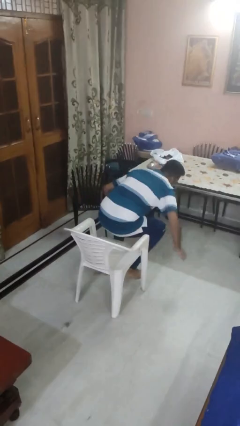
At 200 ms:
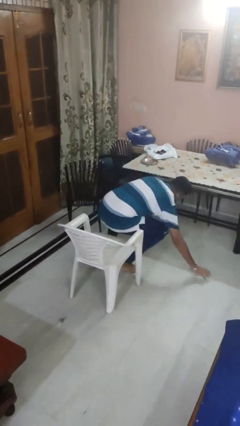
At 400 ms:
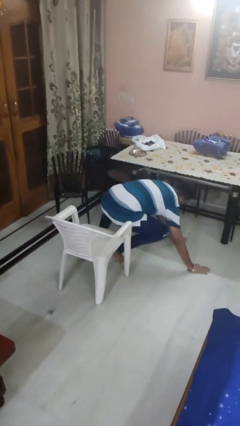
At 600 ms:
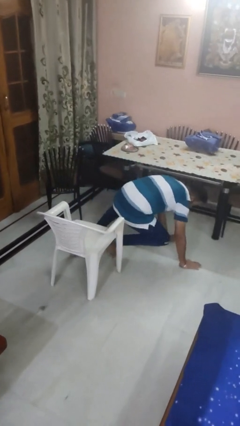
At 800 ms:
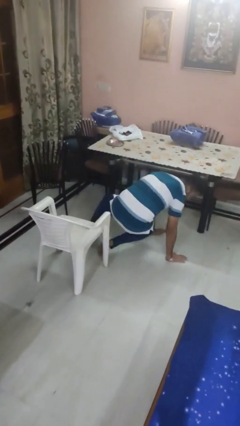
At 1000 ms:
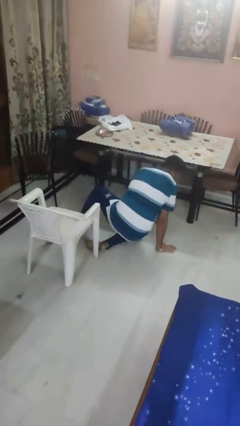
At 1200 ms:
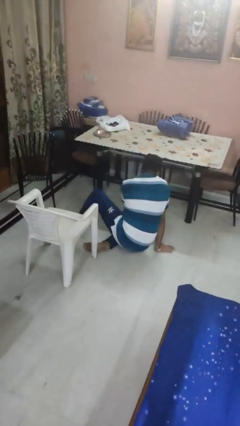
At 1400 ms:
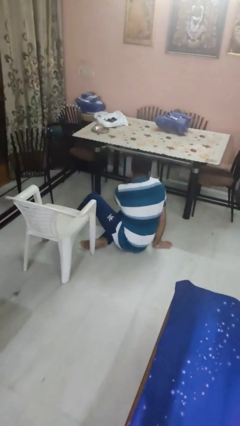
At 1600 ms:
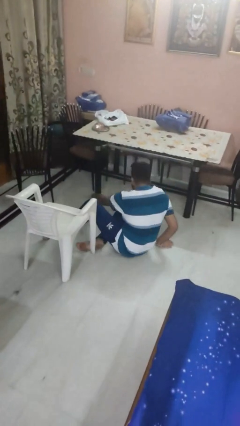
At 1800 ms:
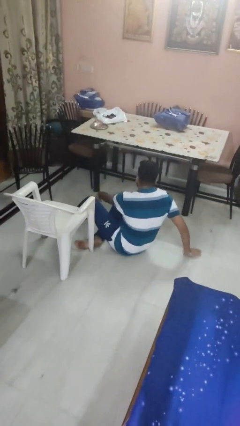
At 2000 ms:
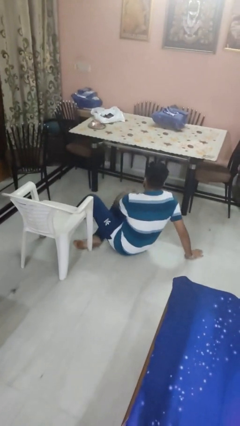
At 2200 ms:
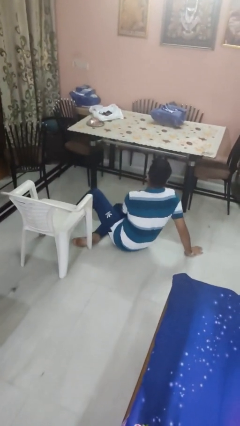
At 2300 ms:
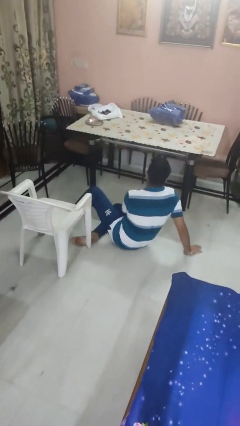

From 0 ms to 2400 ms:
person falls from chair

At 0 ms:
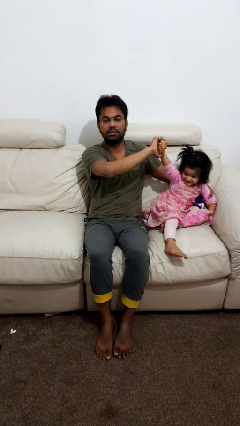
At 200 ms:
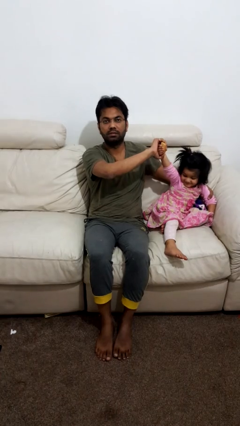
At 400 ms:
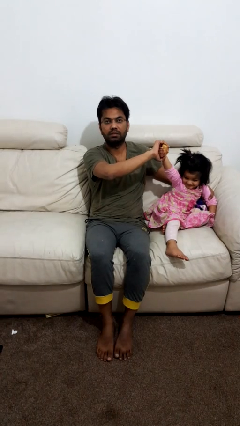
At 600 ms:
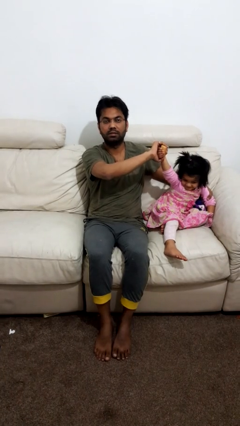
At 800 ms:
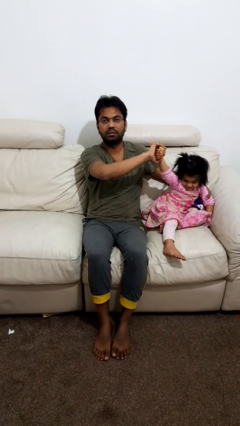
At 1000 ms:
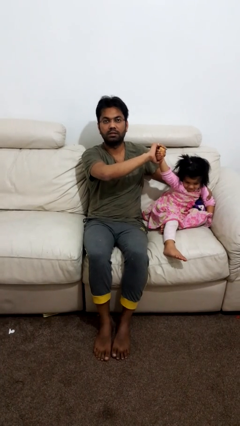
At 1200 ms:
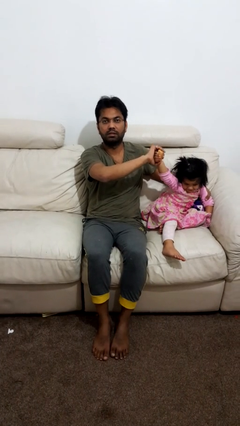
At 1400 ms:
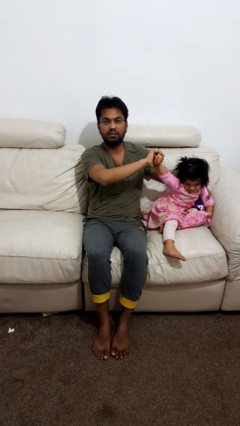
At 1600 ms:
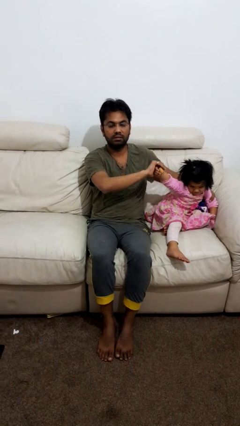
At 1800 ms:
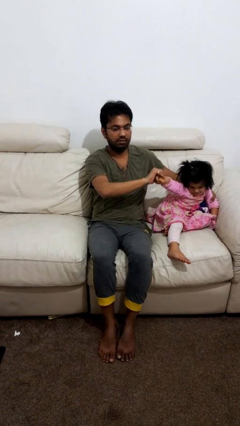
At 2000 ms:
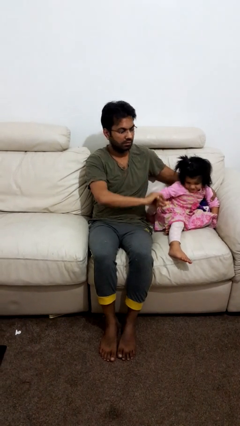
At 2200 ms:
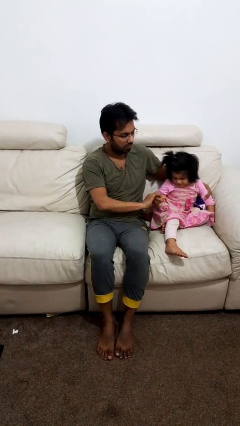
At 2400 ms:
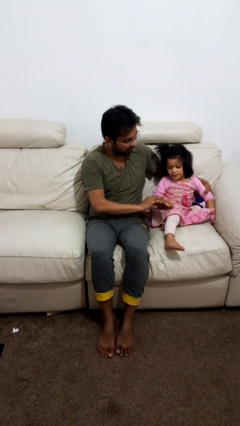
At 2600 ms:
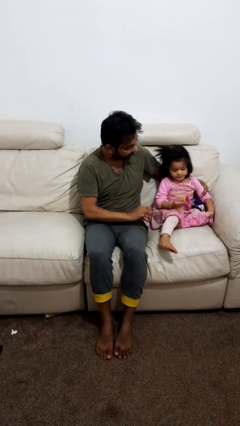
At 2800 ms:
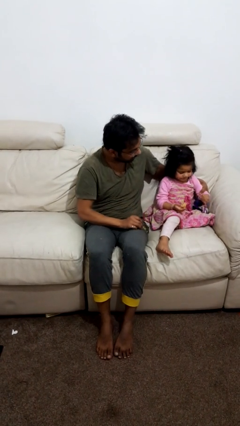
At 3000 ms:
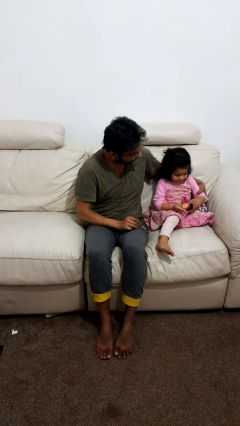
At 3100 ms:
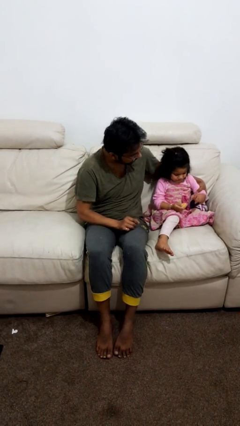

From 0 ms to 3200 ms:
person highfives hand

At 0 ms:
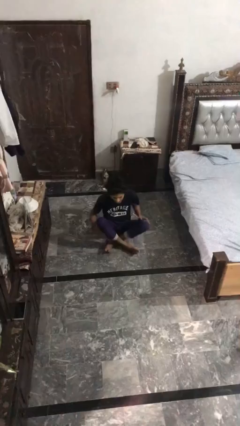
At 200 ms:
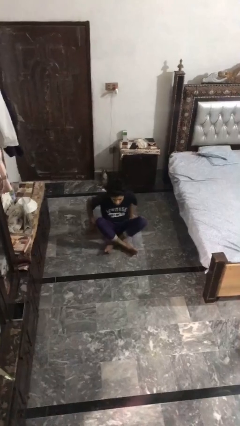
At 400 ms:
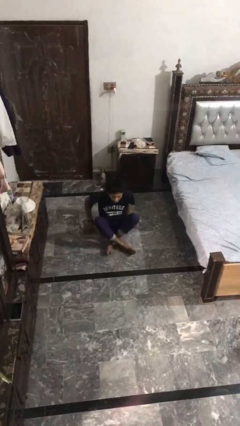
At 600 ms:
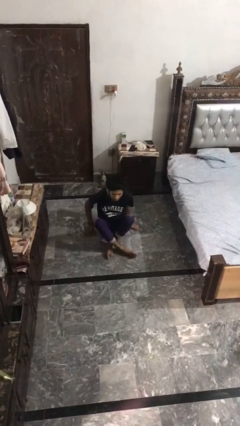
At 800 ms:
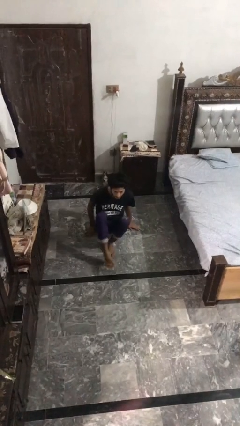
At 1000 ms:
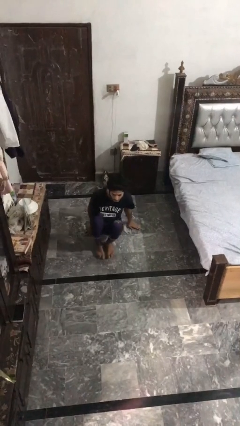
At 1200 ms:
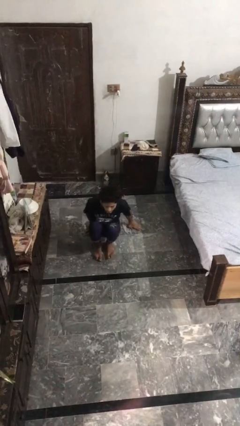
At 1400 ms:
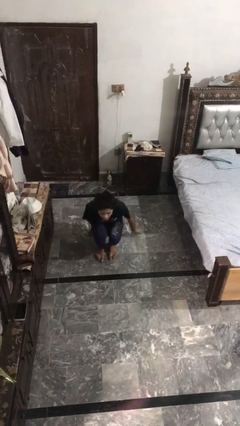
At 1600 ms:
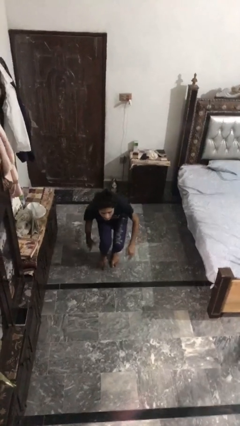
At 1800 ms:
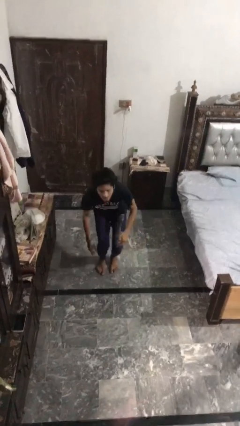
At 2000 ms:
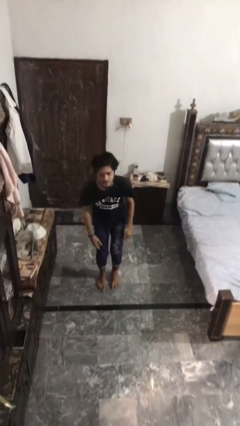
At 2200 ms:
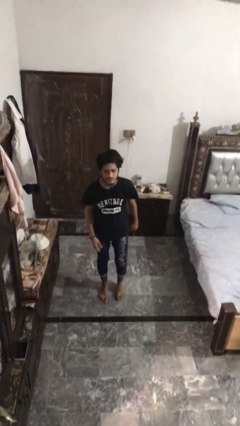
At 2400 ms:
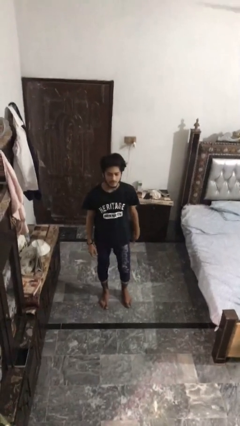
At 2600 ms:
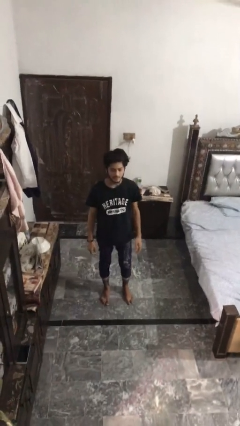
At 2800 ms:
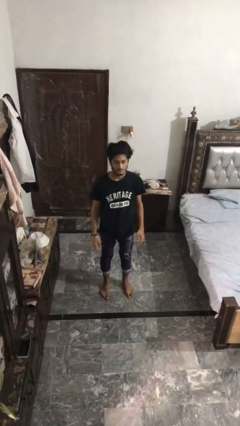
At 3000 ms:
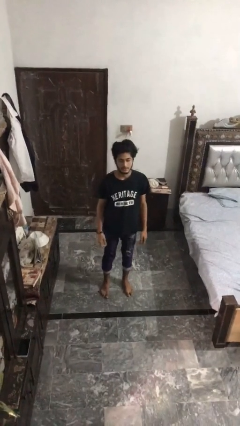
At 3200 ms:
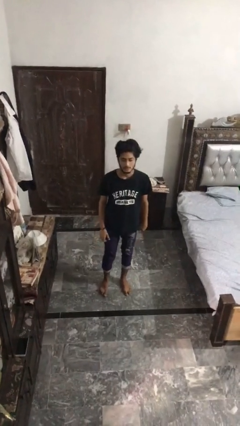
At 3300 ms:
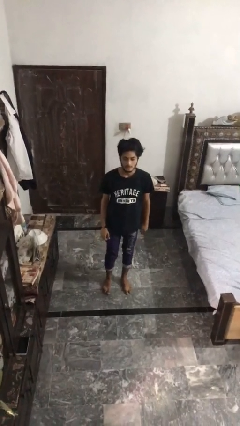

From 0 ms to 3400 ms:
person stands up from floor

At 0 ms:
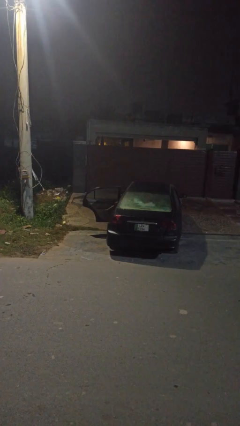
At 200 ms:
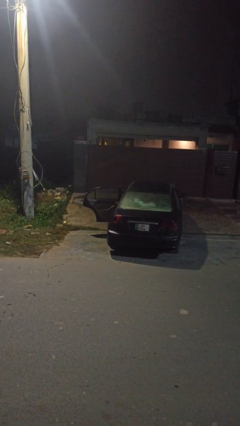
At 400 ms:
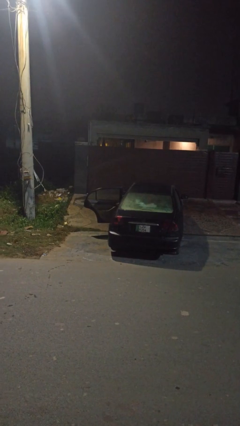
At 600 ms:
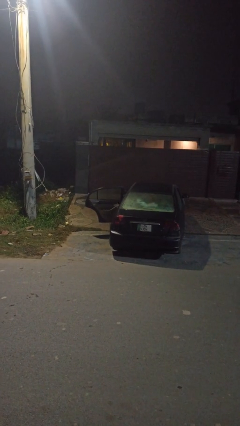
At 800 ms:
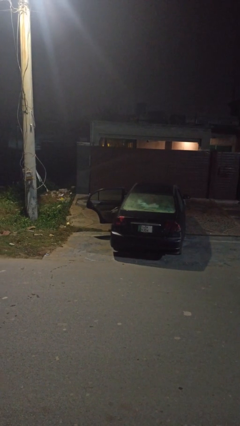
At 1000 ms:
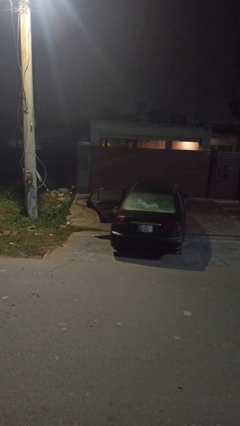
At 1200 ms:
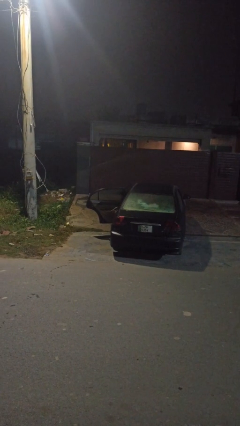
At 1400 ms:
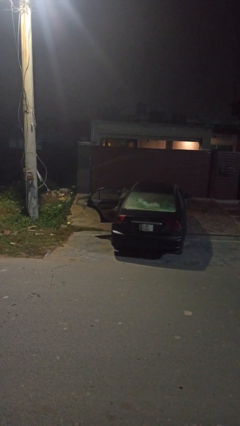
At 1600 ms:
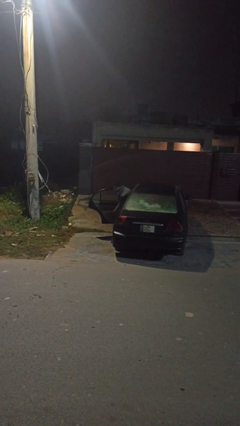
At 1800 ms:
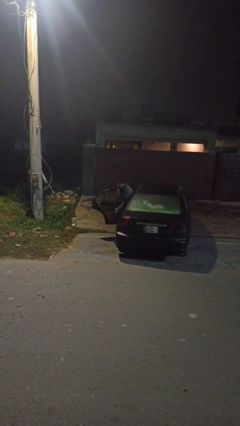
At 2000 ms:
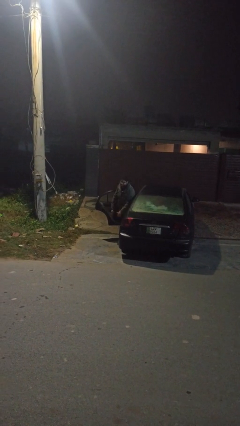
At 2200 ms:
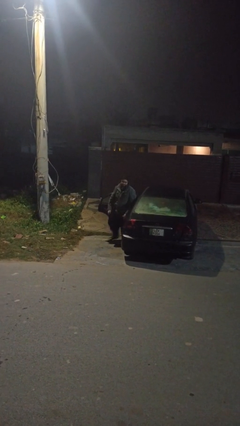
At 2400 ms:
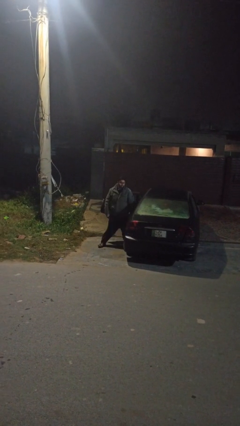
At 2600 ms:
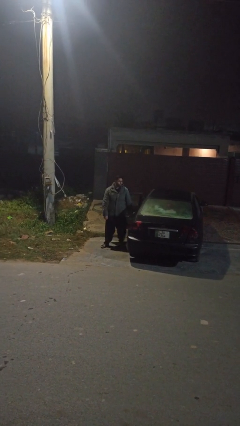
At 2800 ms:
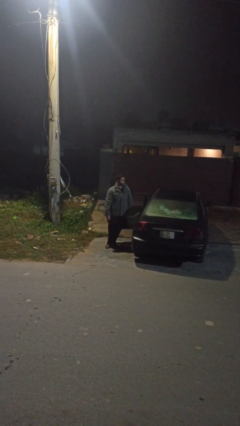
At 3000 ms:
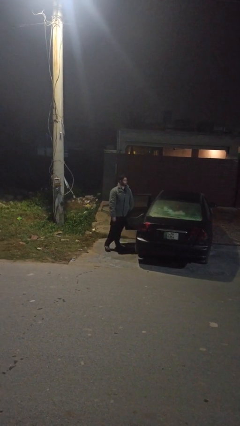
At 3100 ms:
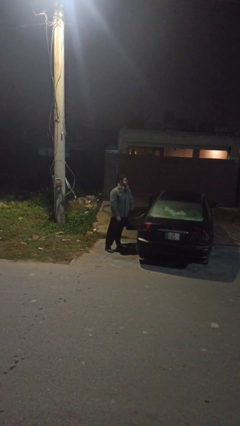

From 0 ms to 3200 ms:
person exits car

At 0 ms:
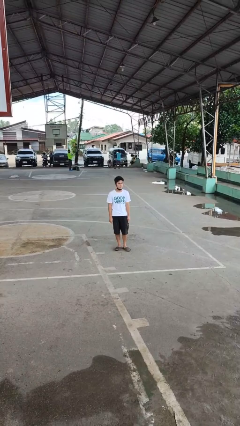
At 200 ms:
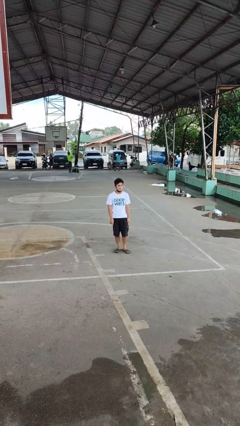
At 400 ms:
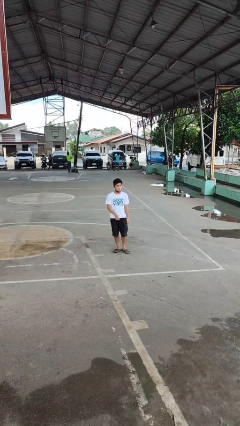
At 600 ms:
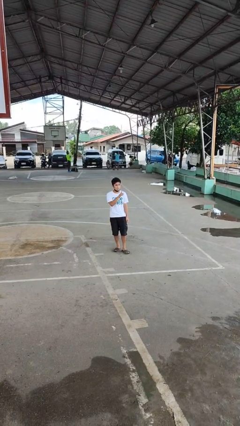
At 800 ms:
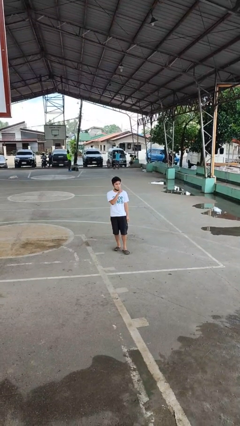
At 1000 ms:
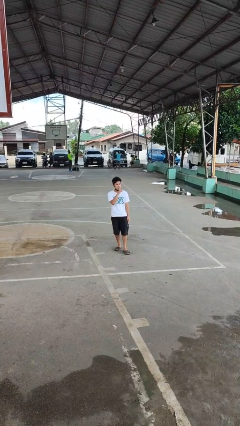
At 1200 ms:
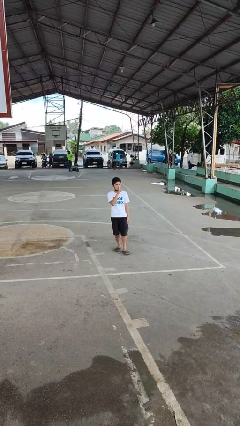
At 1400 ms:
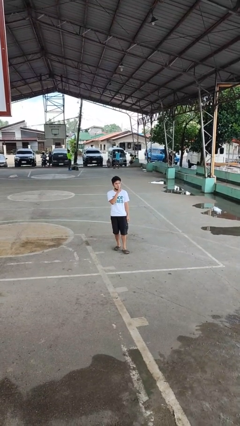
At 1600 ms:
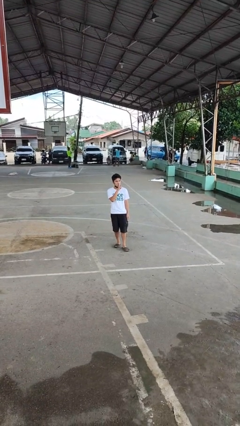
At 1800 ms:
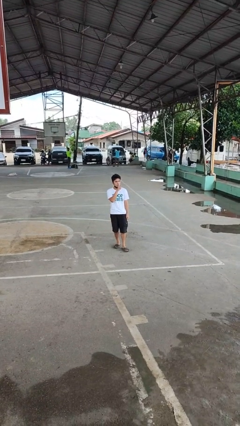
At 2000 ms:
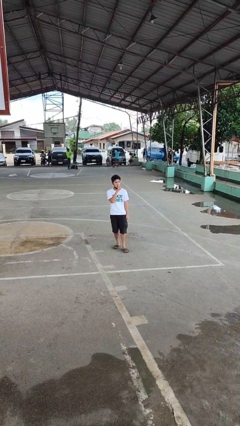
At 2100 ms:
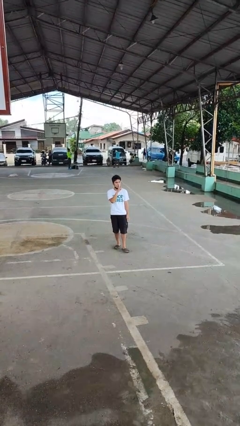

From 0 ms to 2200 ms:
person gestures be quiet

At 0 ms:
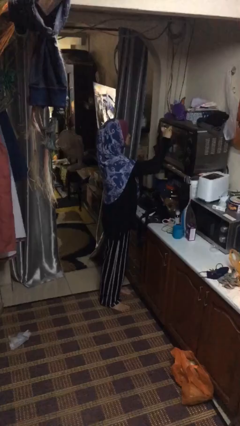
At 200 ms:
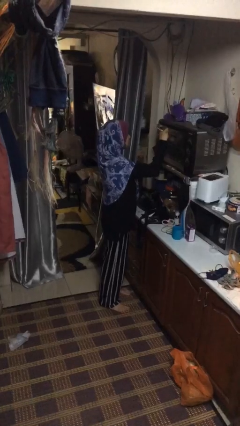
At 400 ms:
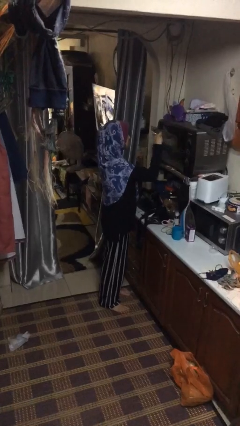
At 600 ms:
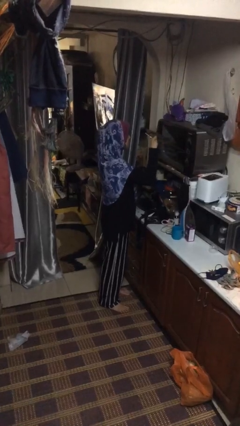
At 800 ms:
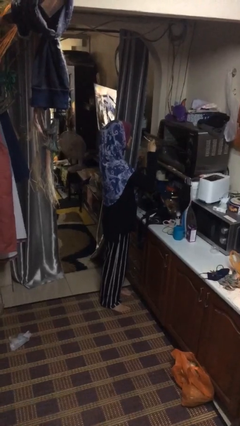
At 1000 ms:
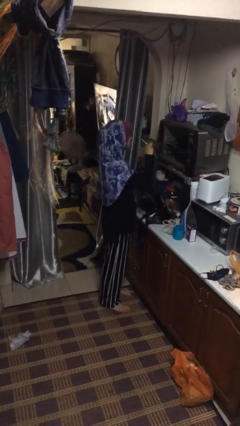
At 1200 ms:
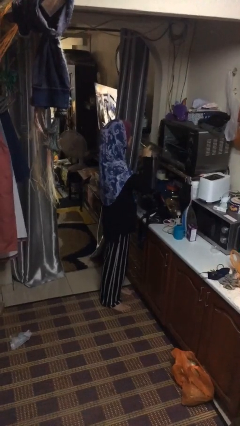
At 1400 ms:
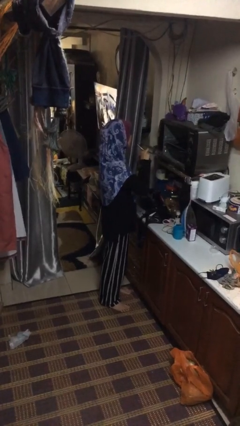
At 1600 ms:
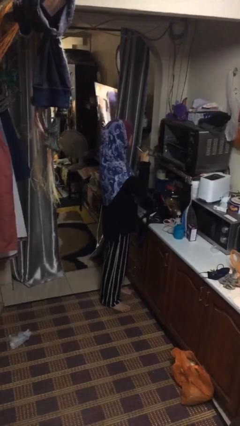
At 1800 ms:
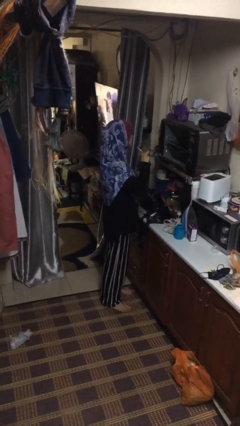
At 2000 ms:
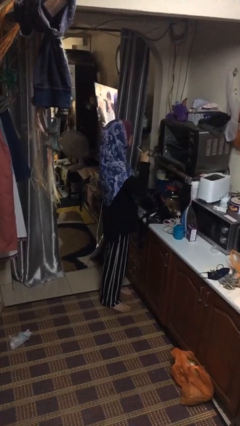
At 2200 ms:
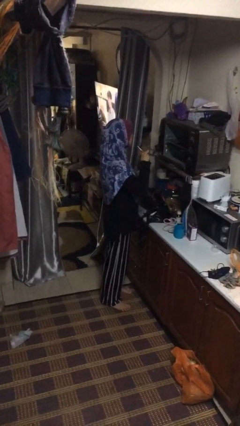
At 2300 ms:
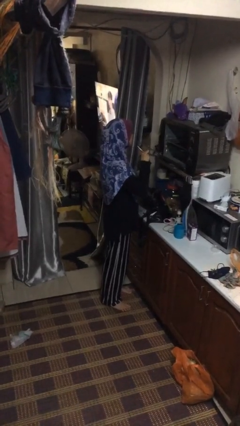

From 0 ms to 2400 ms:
person opens oven door
